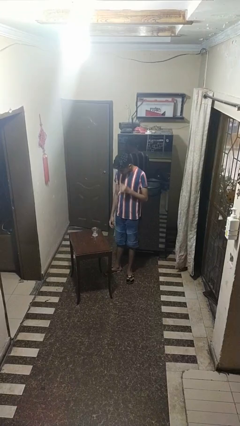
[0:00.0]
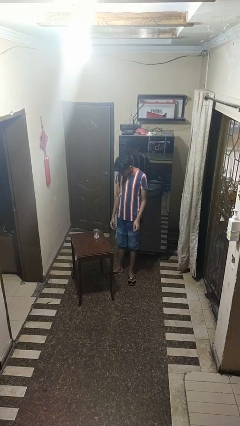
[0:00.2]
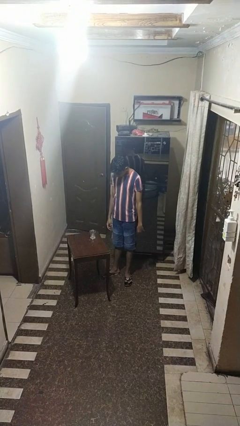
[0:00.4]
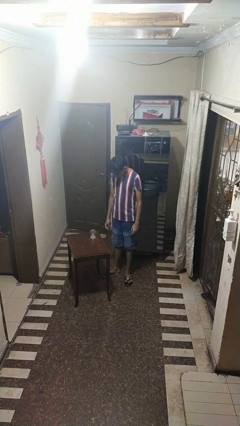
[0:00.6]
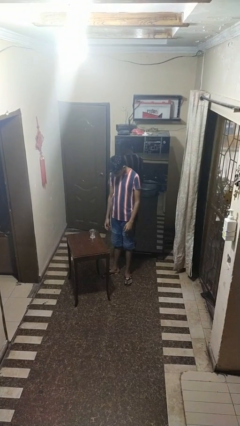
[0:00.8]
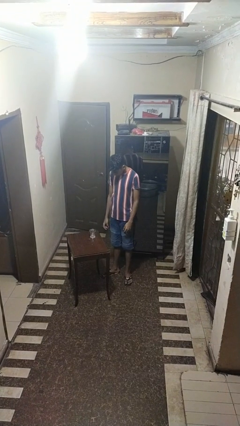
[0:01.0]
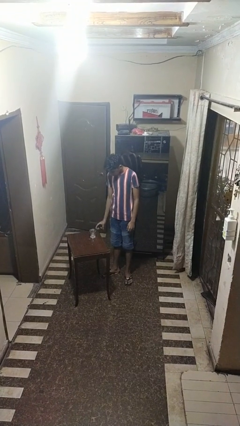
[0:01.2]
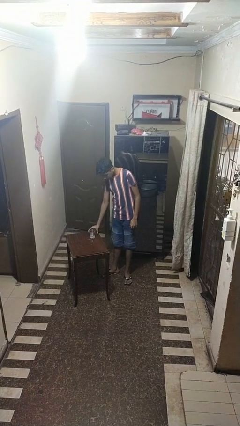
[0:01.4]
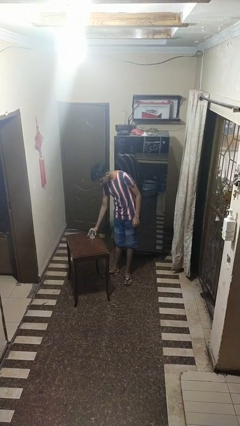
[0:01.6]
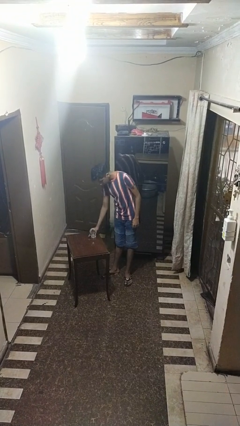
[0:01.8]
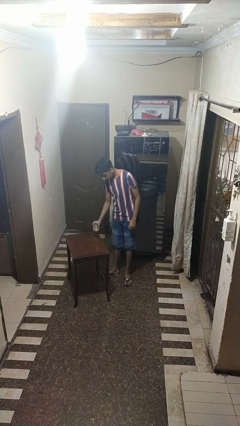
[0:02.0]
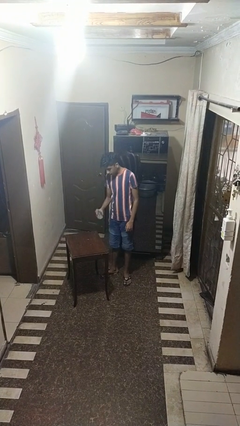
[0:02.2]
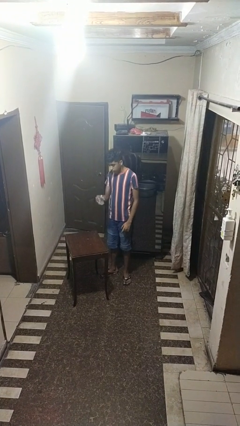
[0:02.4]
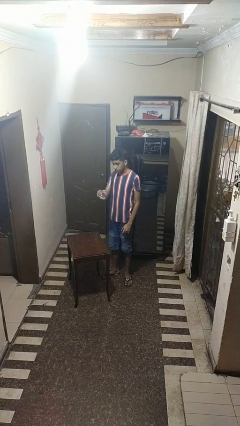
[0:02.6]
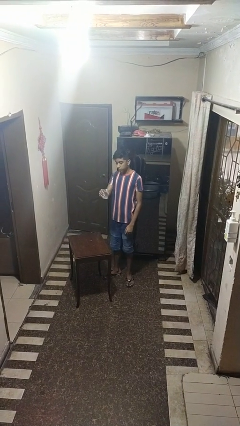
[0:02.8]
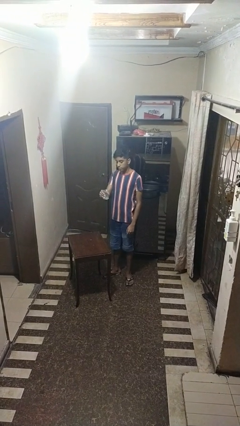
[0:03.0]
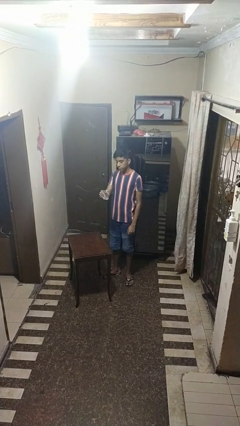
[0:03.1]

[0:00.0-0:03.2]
person picks up object from table

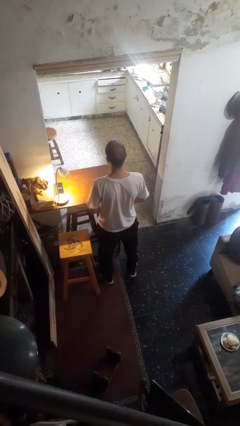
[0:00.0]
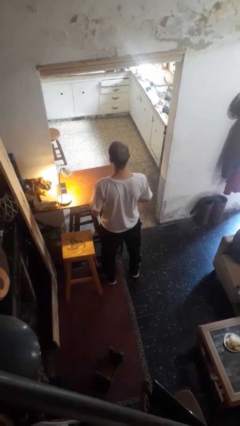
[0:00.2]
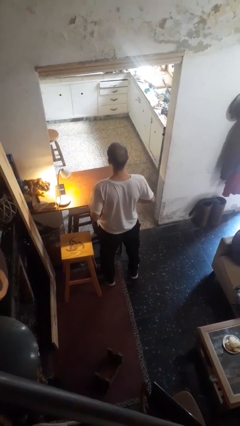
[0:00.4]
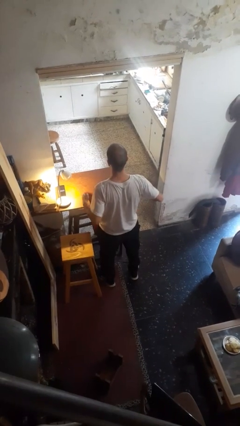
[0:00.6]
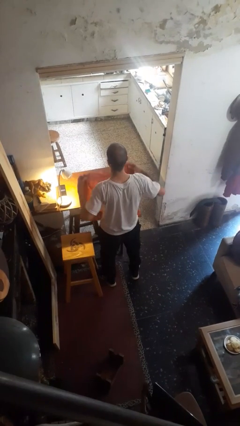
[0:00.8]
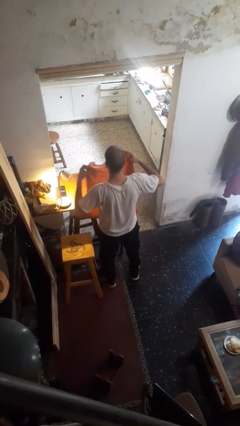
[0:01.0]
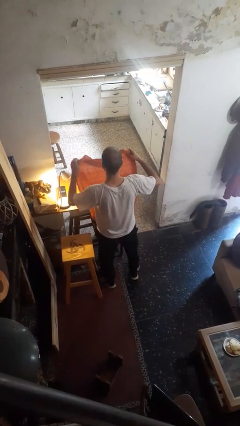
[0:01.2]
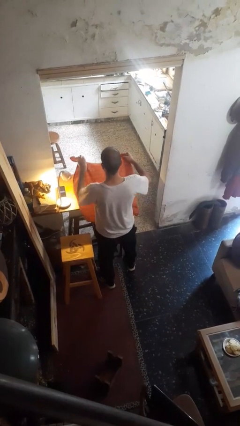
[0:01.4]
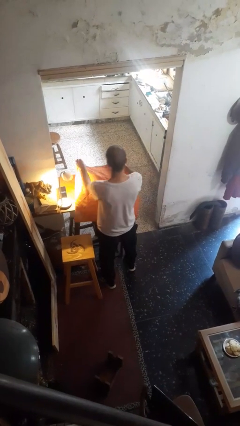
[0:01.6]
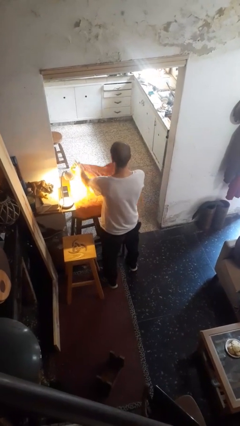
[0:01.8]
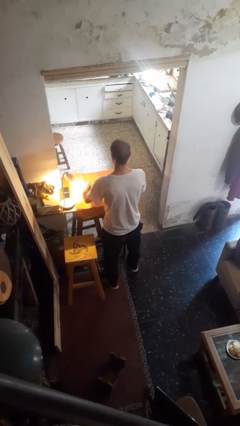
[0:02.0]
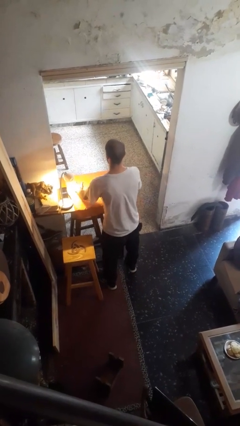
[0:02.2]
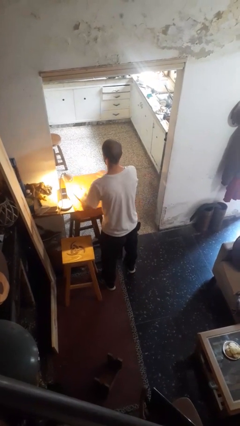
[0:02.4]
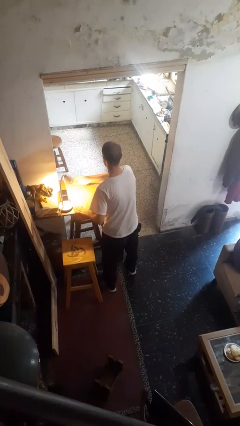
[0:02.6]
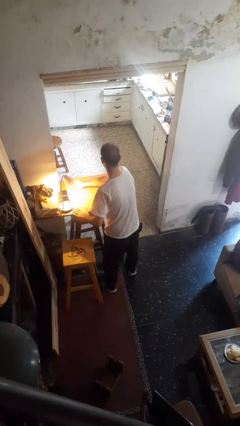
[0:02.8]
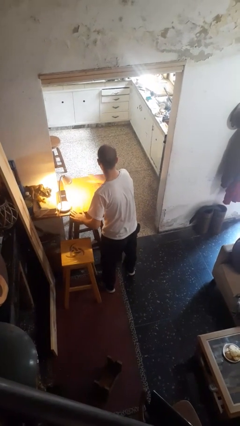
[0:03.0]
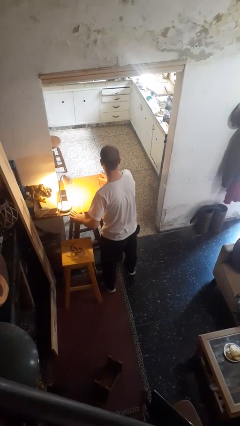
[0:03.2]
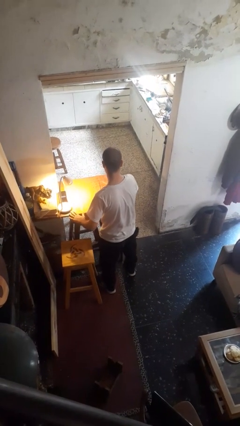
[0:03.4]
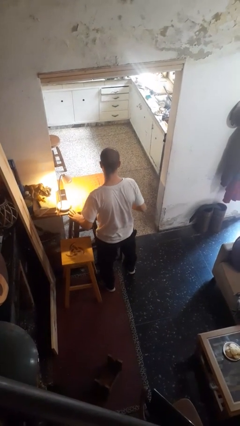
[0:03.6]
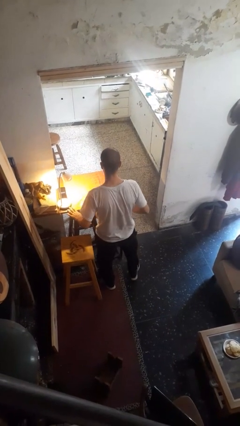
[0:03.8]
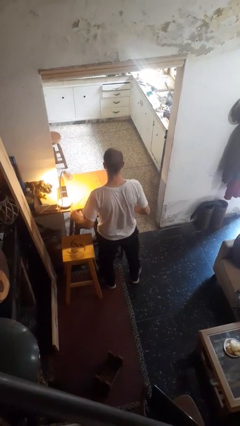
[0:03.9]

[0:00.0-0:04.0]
person spreads tablecloth

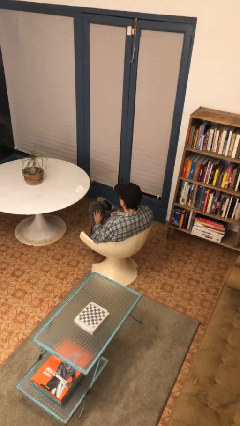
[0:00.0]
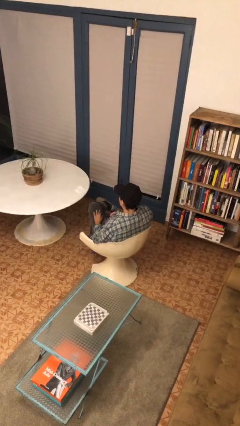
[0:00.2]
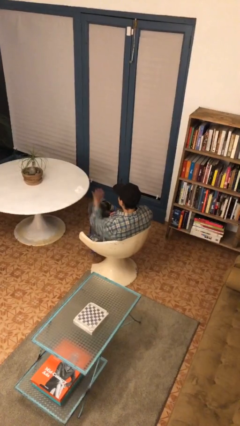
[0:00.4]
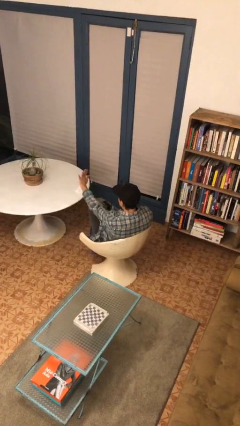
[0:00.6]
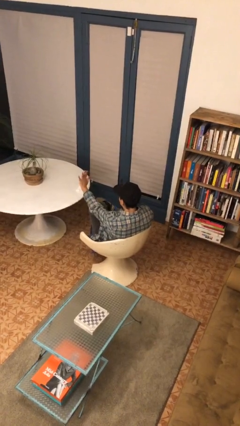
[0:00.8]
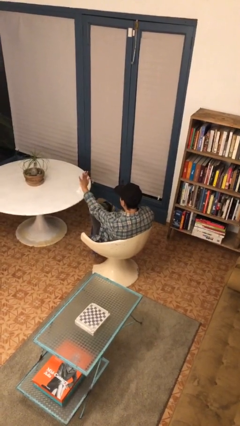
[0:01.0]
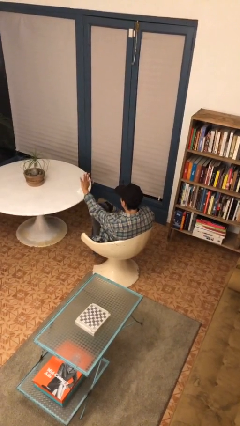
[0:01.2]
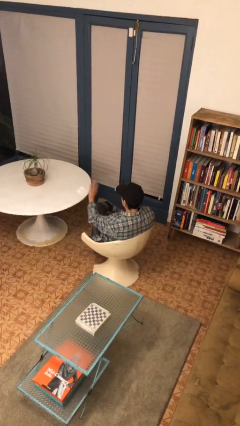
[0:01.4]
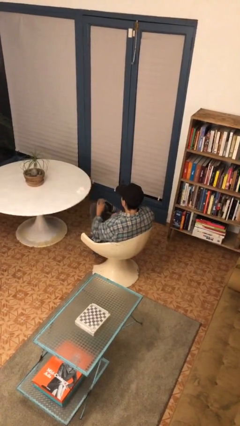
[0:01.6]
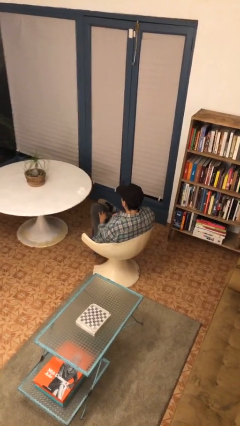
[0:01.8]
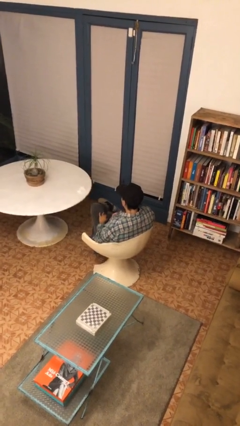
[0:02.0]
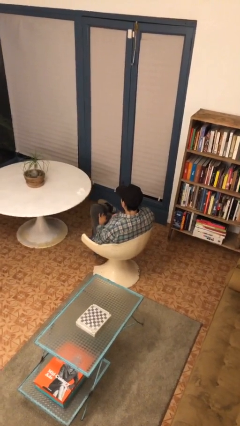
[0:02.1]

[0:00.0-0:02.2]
person gestures stop

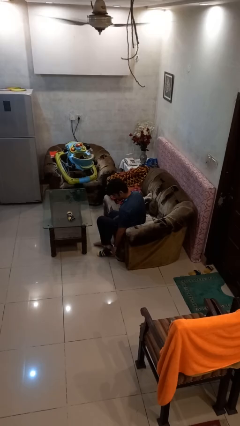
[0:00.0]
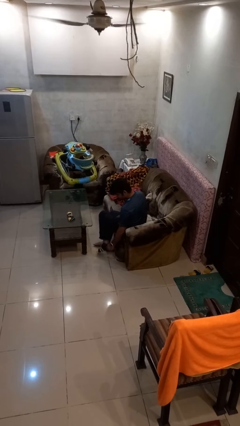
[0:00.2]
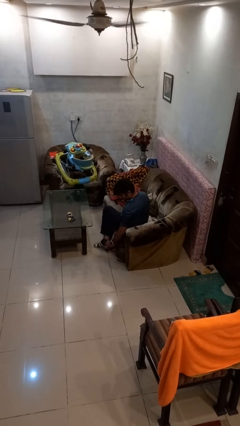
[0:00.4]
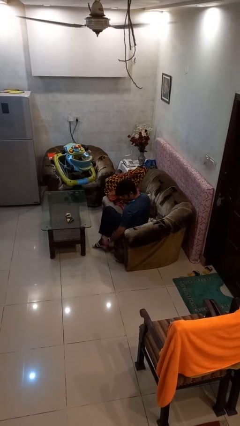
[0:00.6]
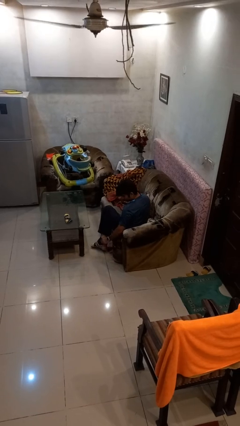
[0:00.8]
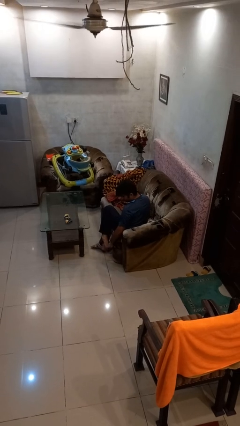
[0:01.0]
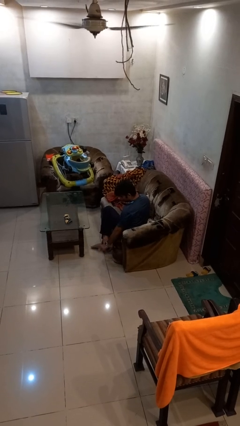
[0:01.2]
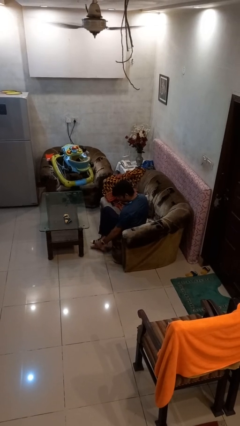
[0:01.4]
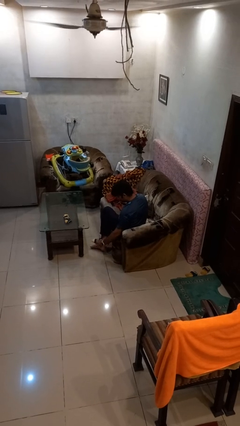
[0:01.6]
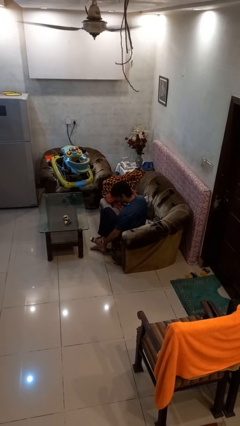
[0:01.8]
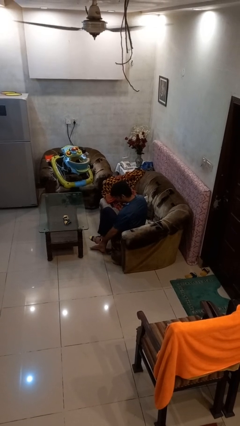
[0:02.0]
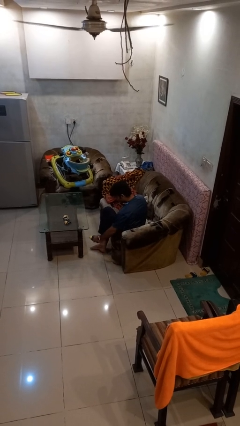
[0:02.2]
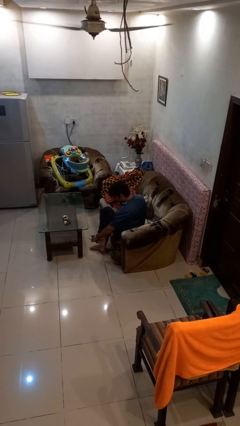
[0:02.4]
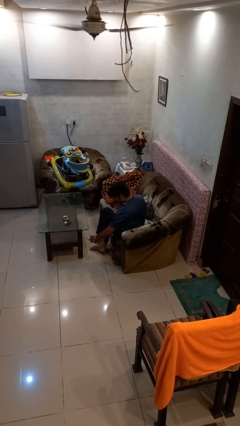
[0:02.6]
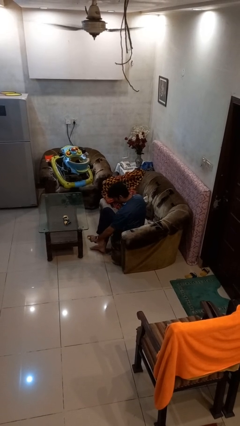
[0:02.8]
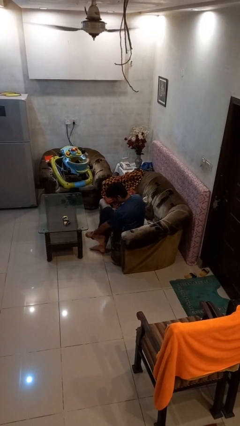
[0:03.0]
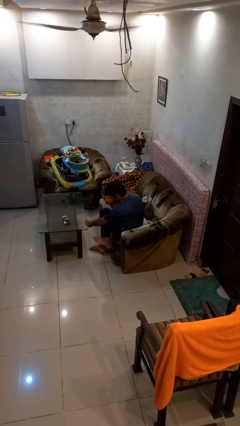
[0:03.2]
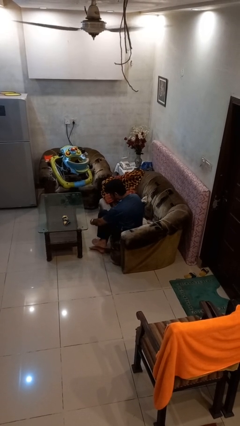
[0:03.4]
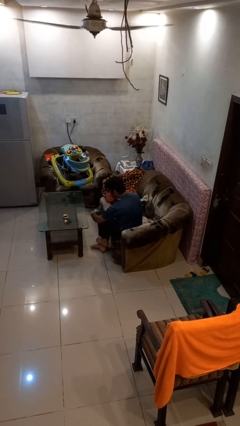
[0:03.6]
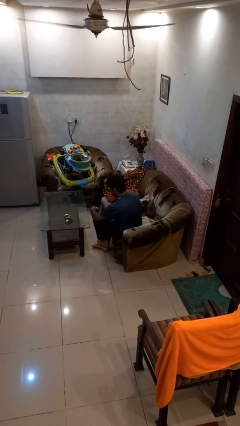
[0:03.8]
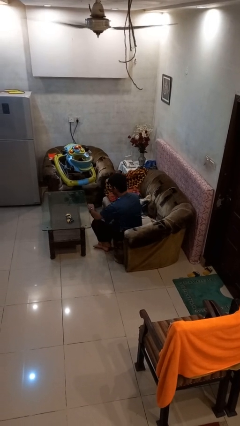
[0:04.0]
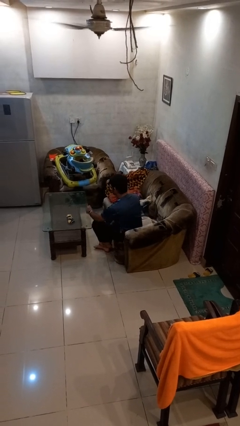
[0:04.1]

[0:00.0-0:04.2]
person takes off socks

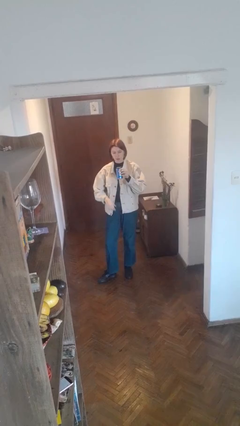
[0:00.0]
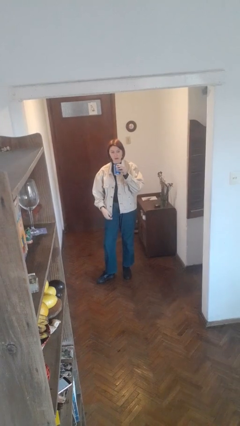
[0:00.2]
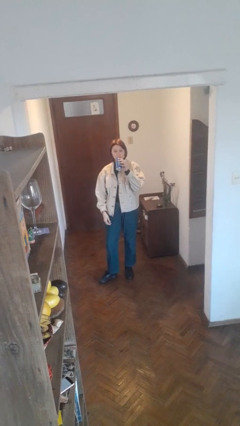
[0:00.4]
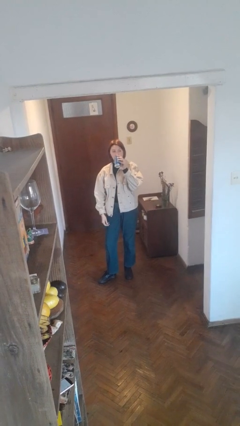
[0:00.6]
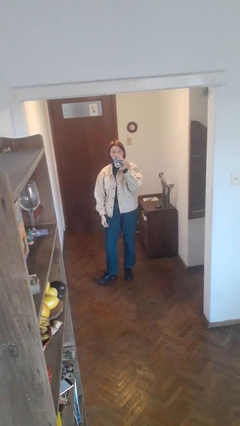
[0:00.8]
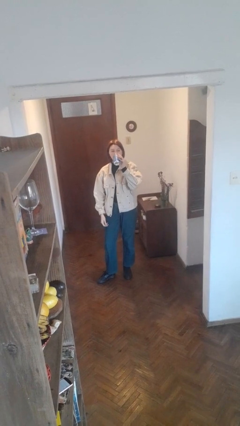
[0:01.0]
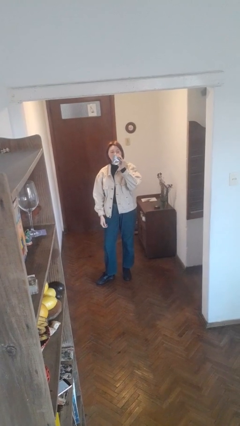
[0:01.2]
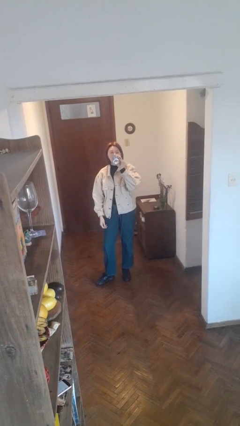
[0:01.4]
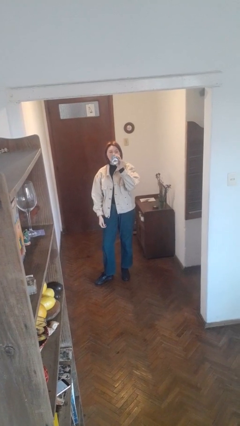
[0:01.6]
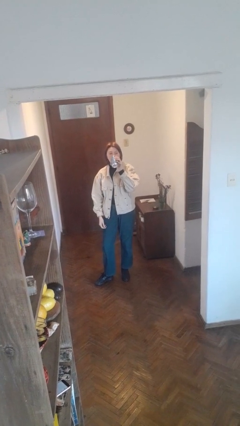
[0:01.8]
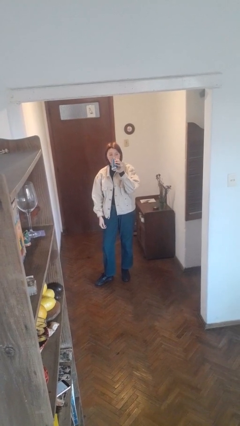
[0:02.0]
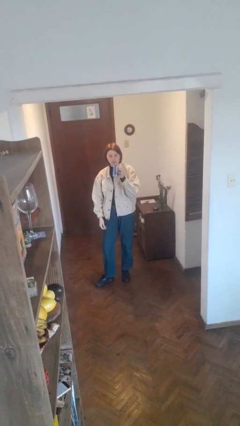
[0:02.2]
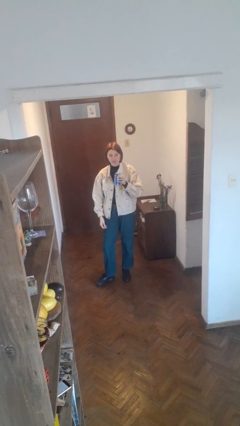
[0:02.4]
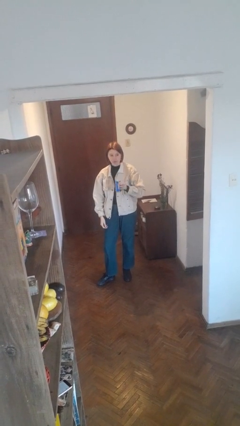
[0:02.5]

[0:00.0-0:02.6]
person drinks from beverage can

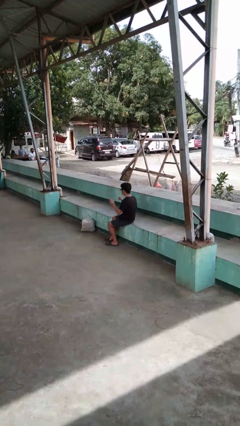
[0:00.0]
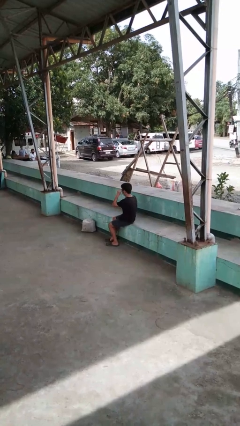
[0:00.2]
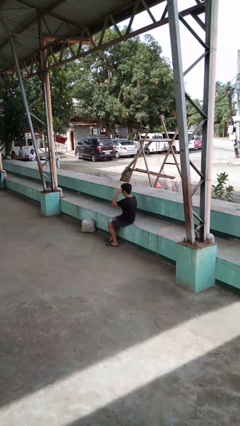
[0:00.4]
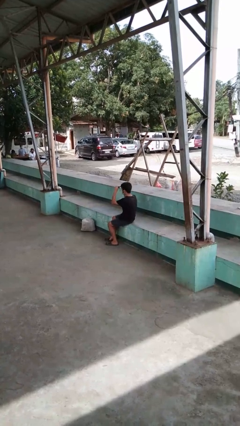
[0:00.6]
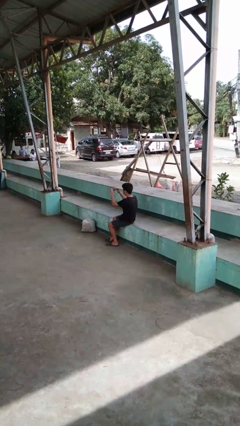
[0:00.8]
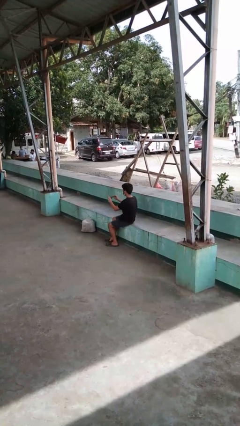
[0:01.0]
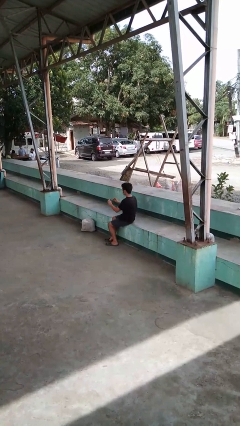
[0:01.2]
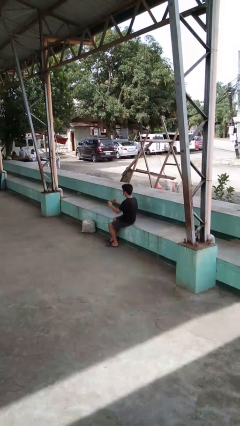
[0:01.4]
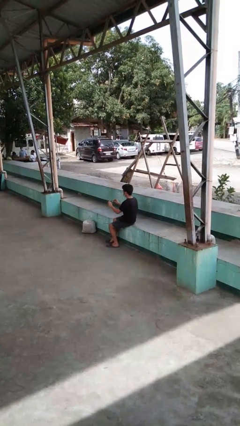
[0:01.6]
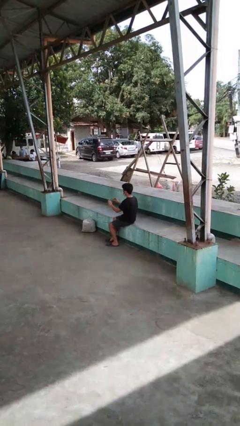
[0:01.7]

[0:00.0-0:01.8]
person brushes hair
